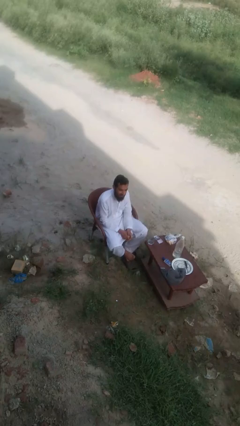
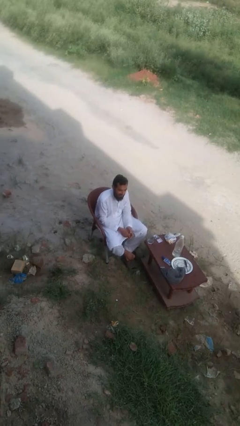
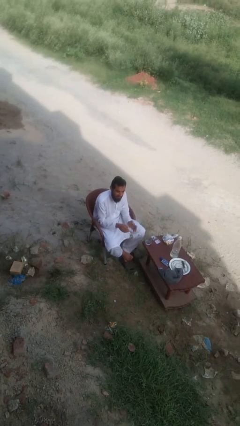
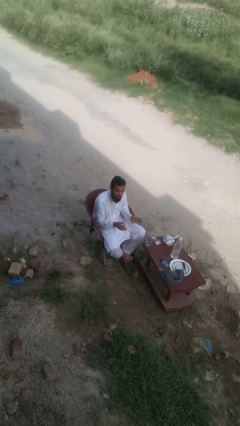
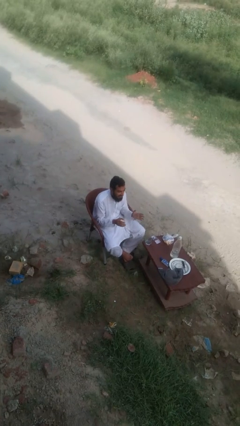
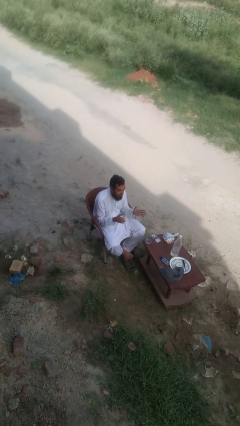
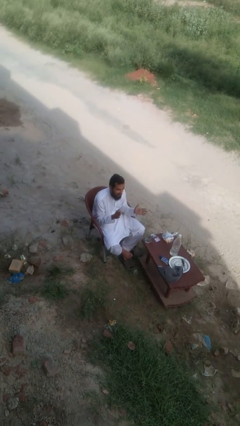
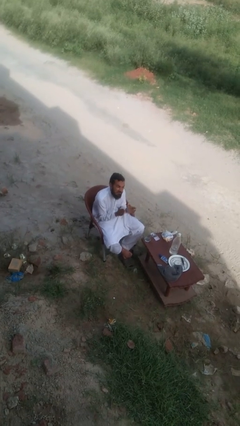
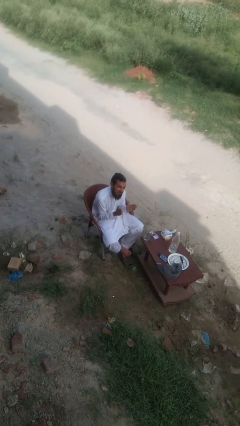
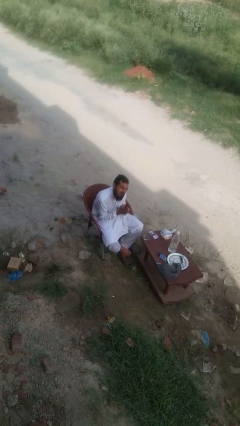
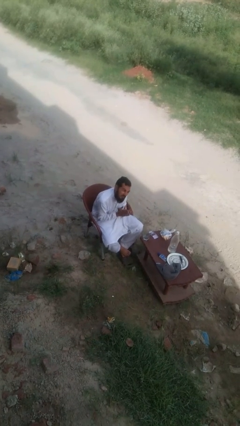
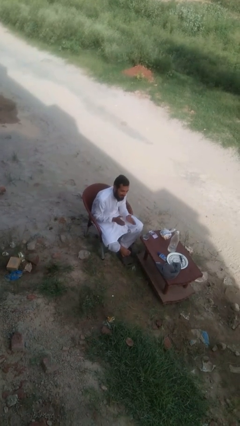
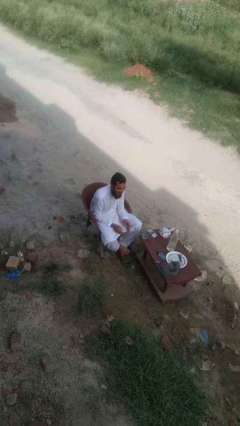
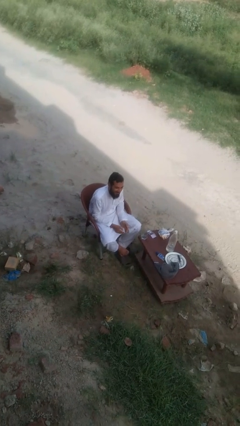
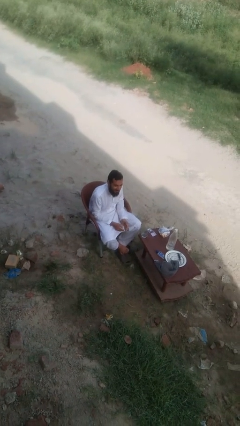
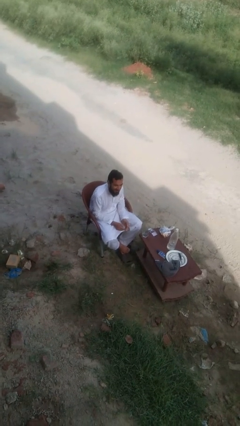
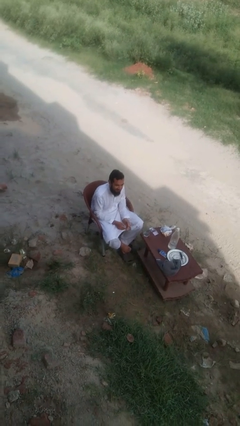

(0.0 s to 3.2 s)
person claps hands

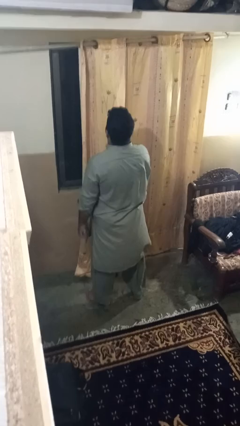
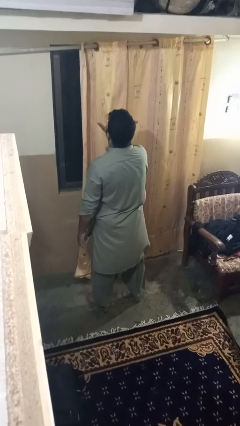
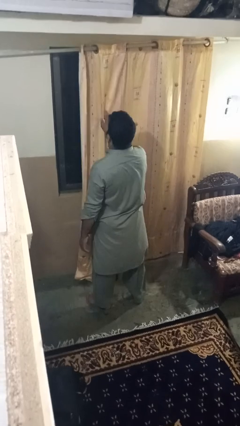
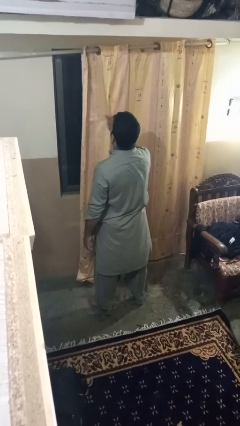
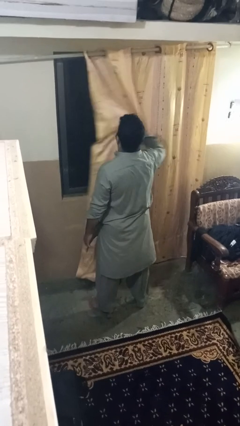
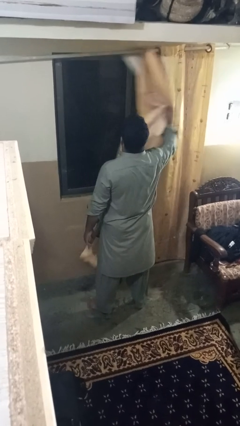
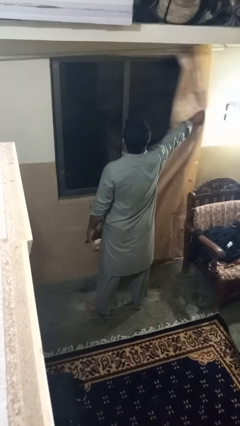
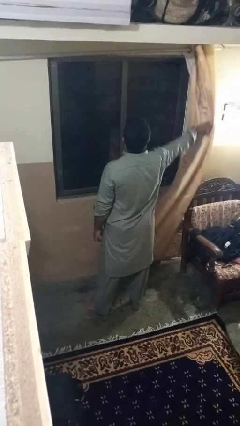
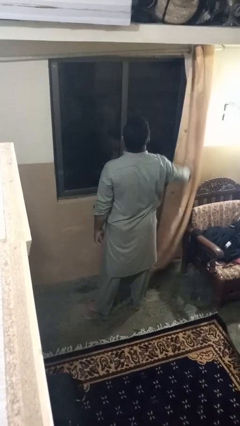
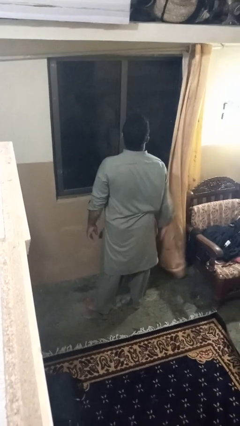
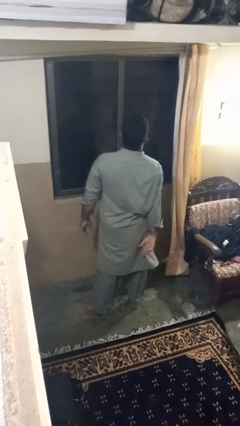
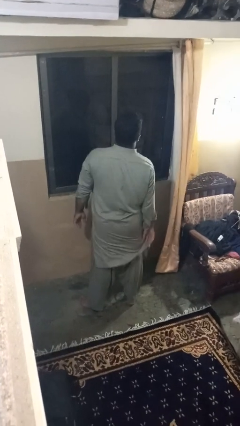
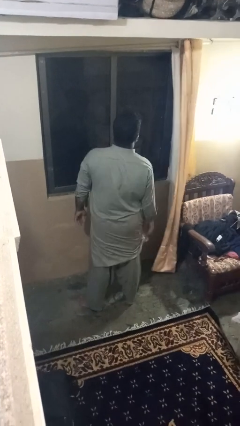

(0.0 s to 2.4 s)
person opens curtains

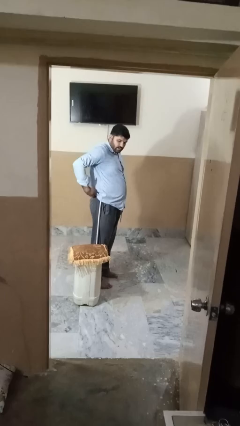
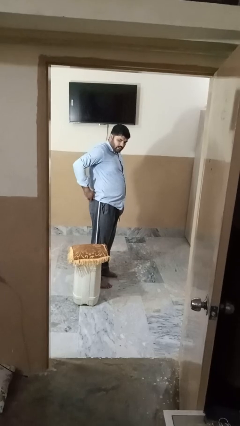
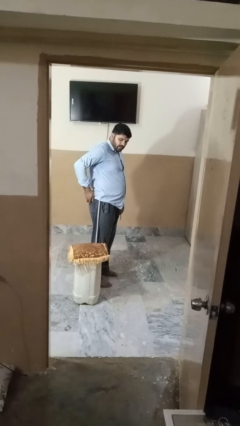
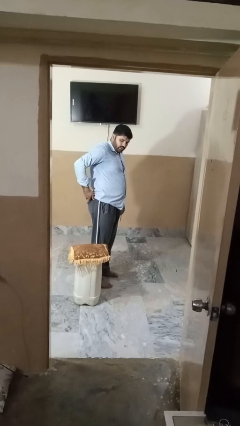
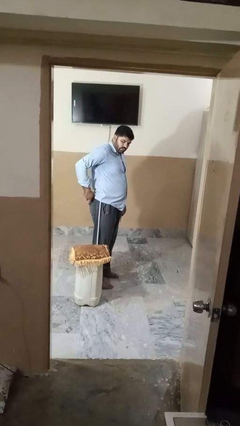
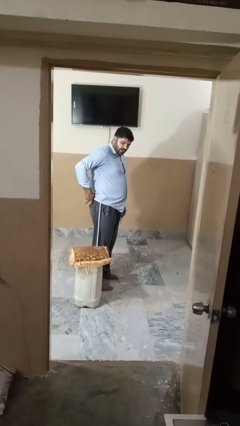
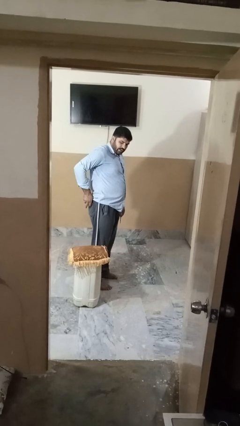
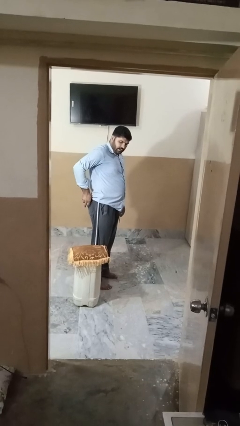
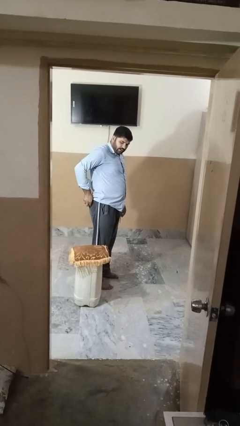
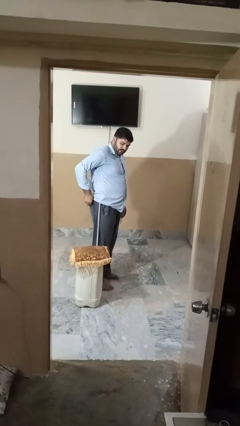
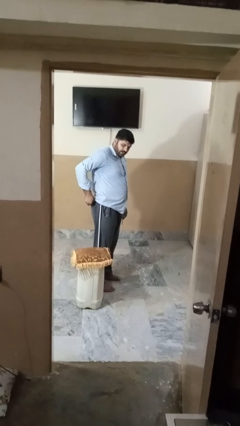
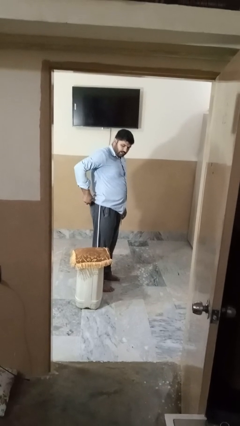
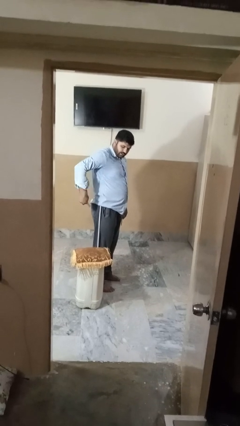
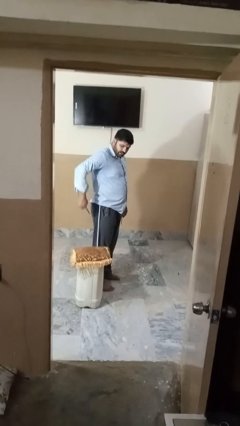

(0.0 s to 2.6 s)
person puts phone into pocket

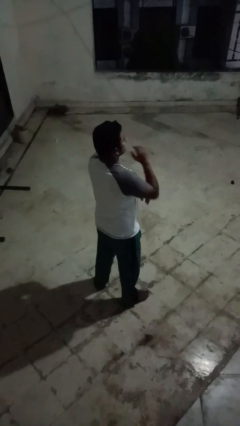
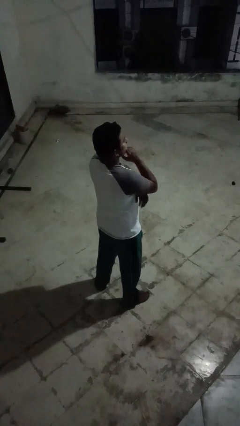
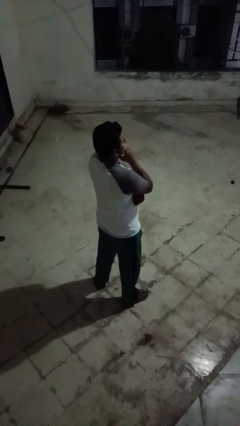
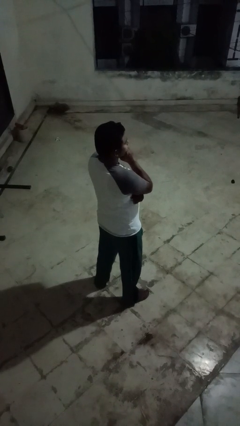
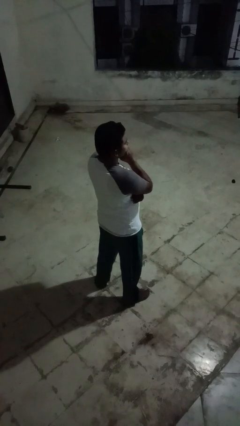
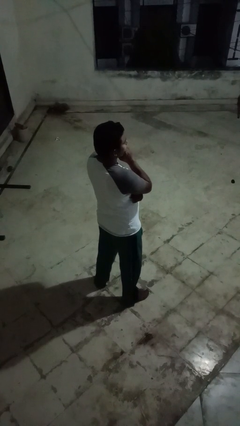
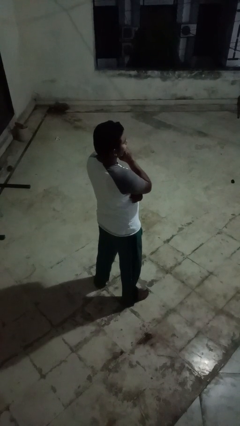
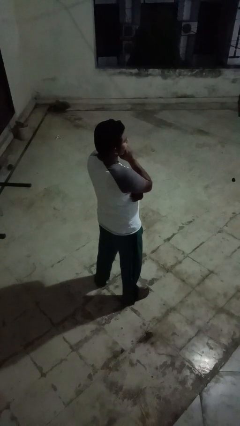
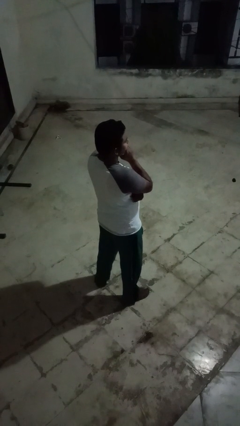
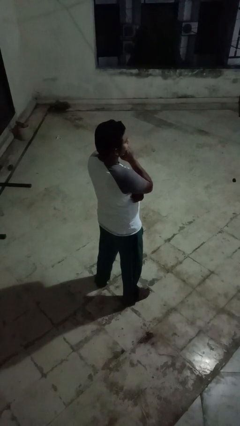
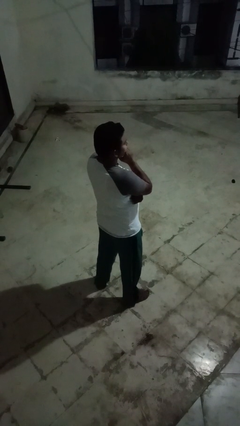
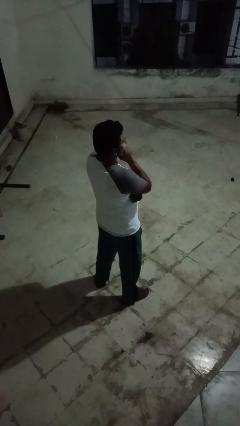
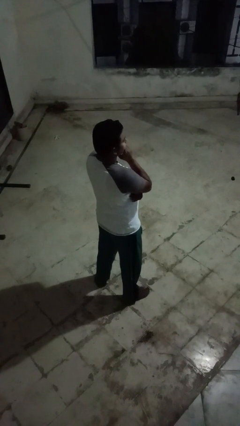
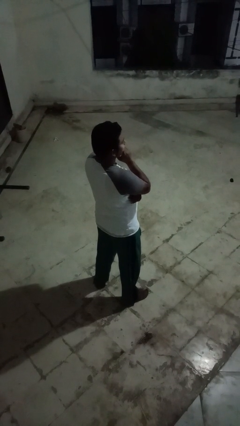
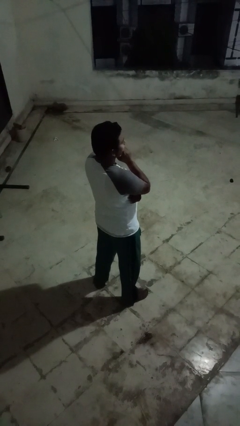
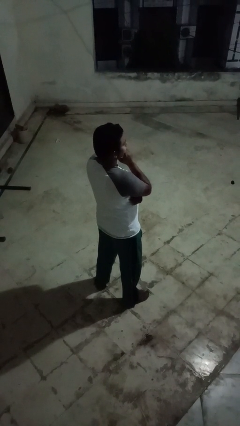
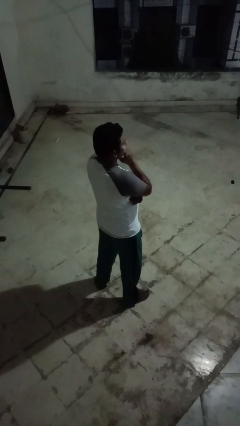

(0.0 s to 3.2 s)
person strokes chin

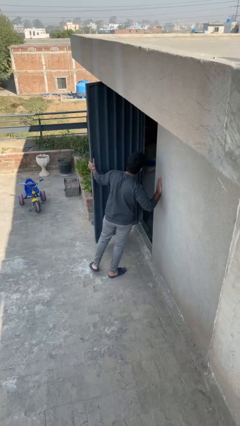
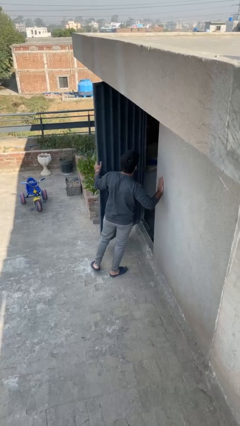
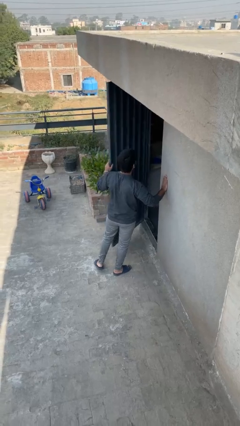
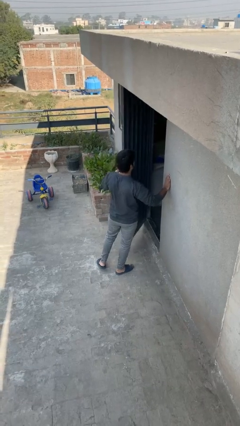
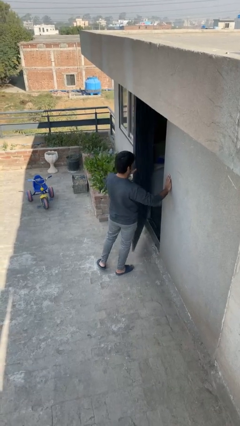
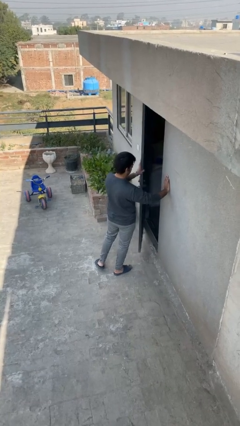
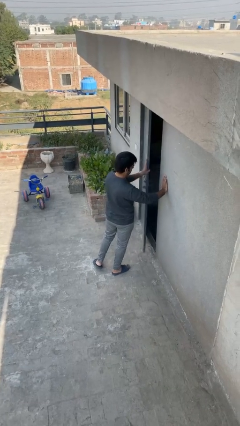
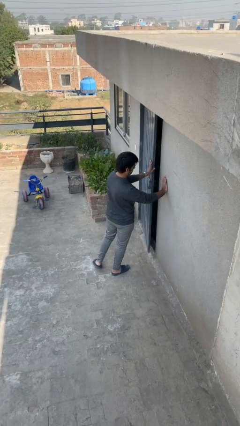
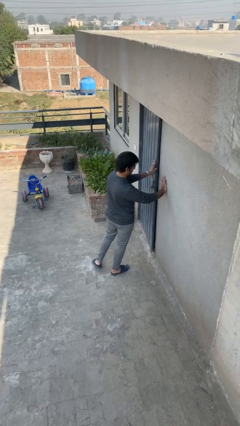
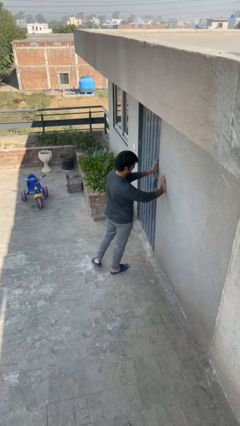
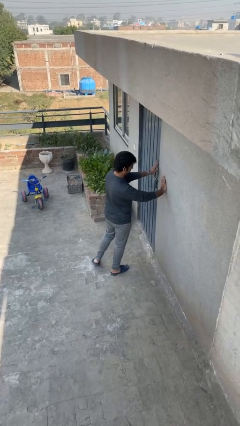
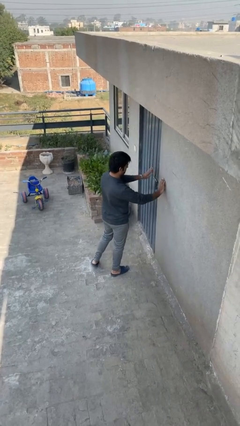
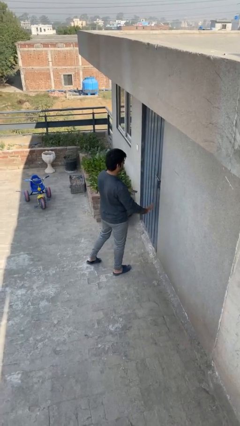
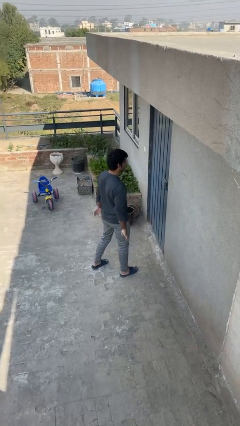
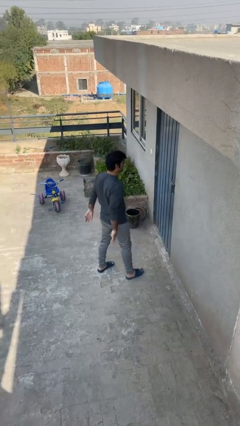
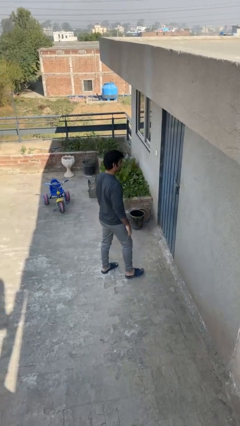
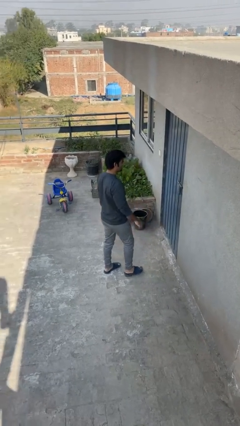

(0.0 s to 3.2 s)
person closes facility door

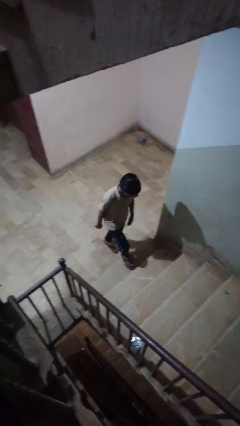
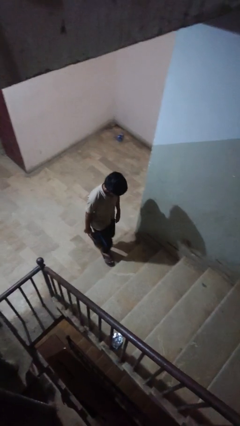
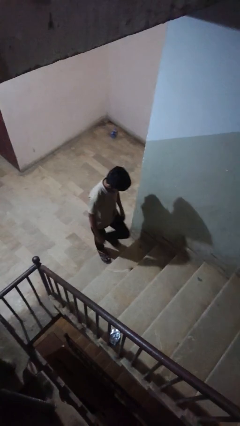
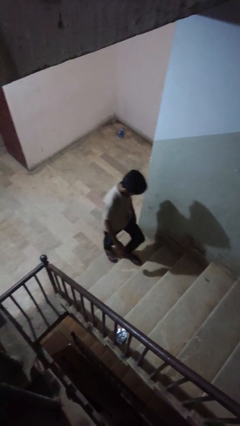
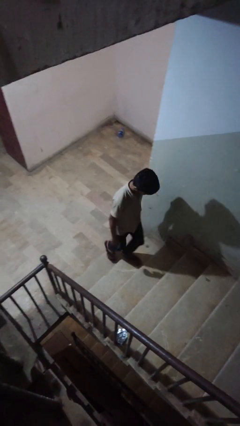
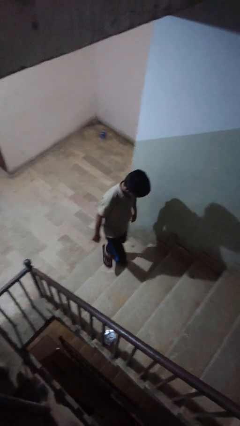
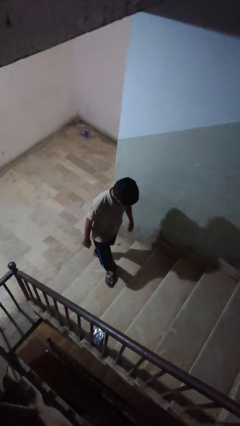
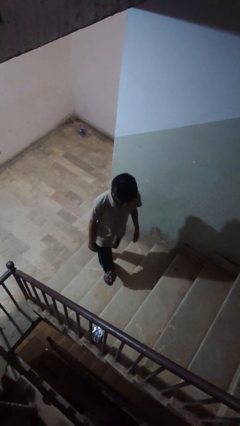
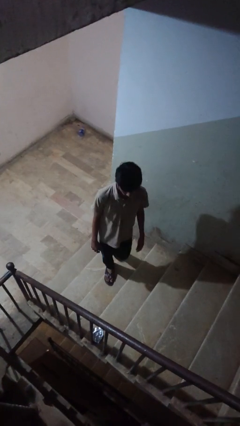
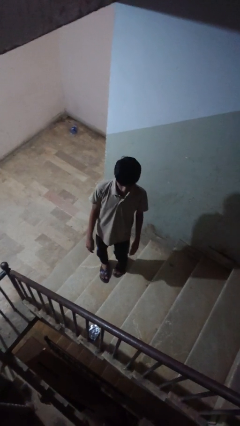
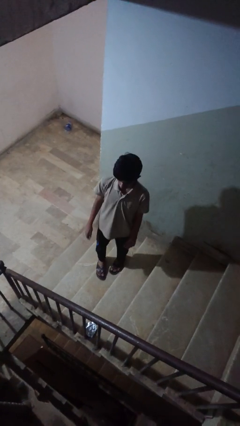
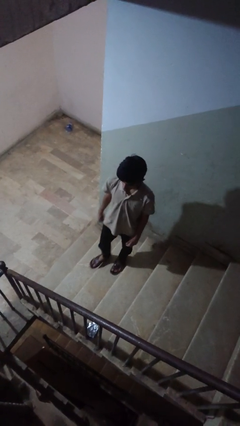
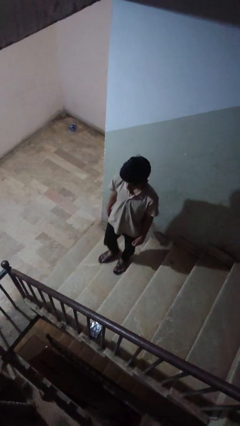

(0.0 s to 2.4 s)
person climbs up stairs

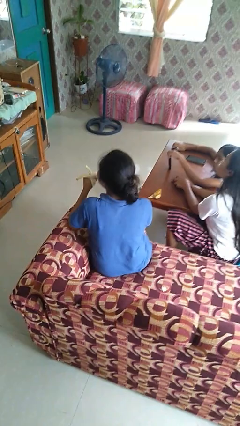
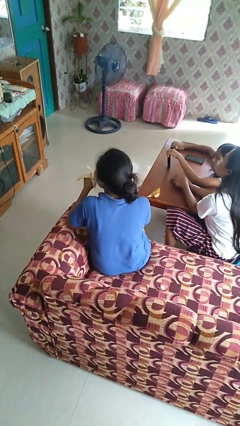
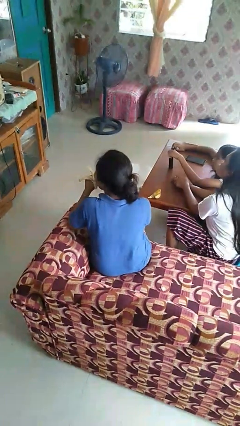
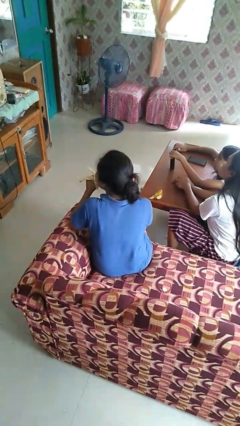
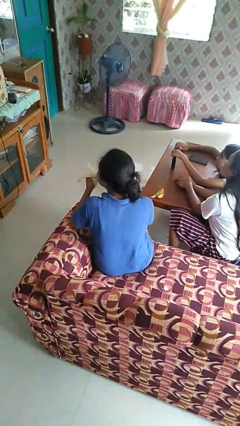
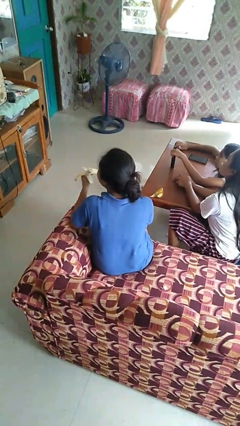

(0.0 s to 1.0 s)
person eats banana
